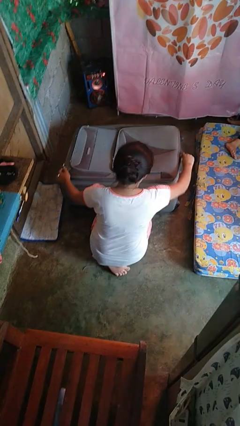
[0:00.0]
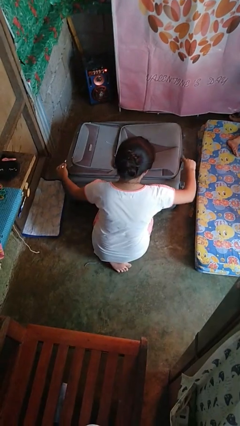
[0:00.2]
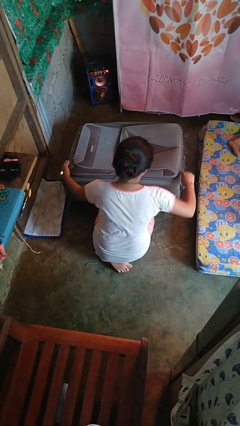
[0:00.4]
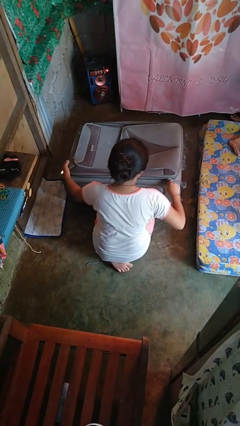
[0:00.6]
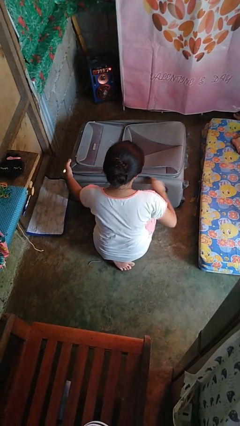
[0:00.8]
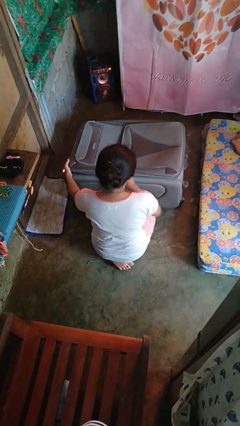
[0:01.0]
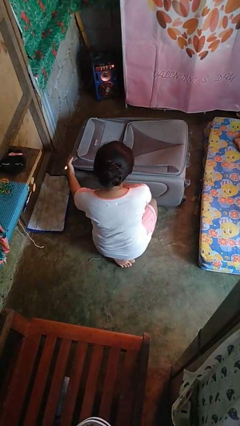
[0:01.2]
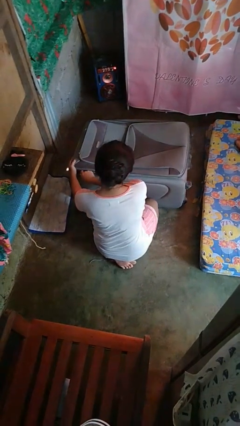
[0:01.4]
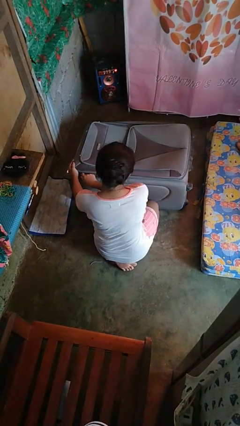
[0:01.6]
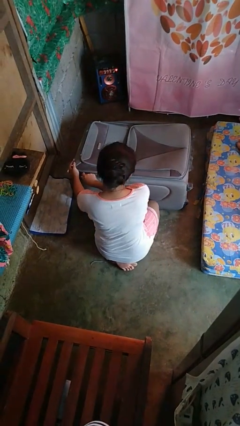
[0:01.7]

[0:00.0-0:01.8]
person closes suitcase

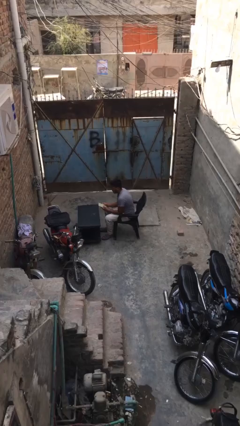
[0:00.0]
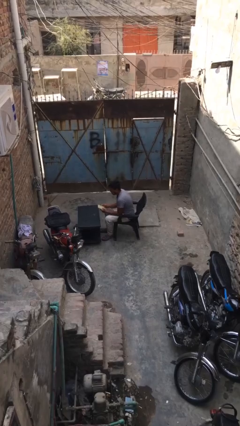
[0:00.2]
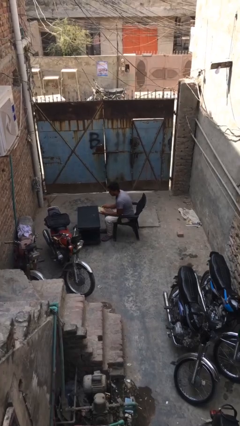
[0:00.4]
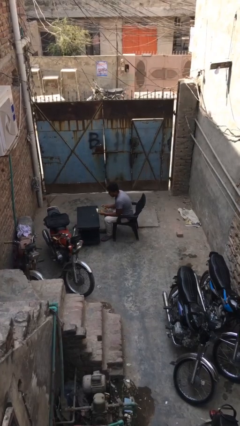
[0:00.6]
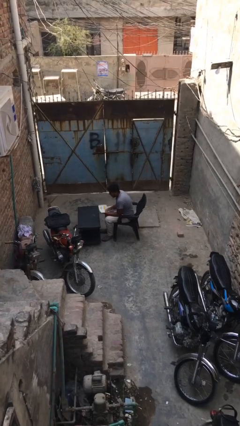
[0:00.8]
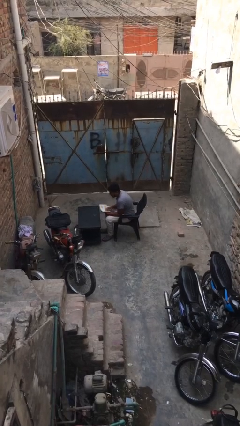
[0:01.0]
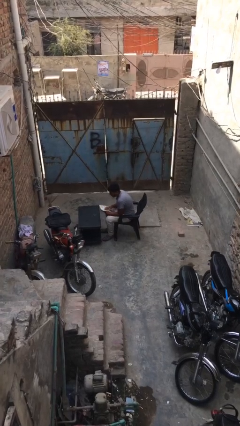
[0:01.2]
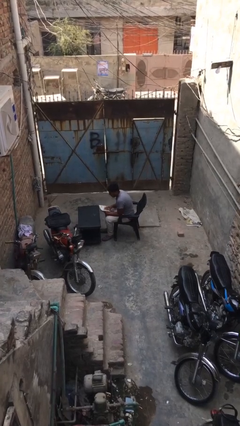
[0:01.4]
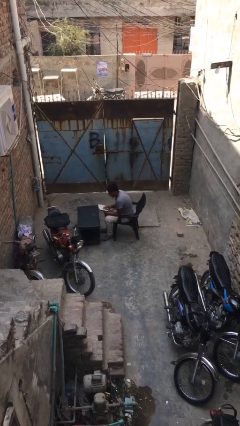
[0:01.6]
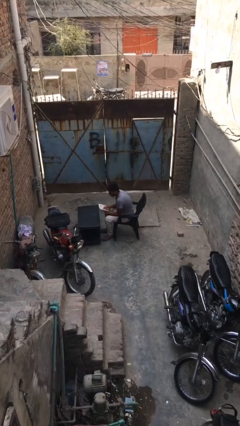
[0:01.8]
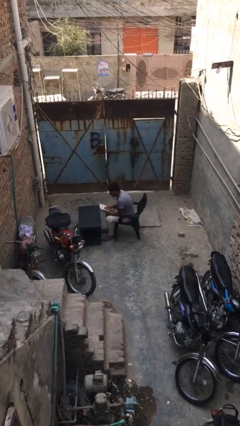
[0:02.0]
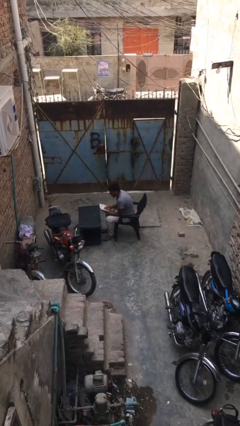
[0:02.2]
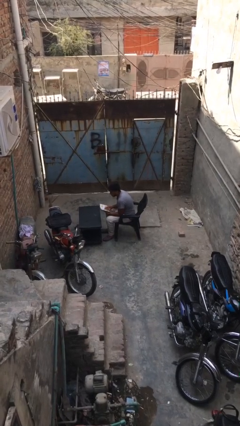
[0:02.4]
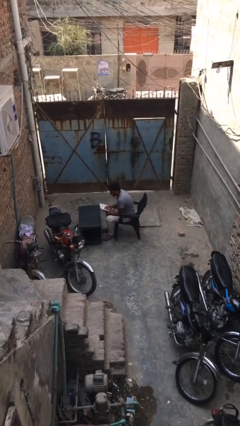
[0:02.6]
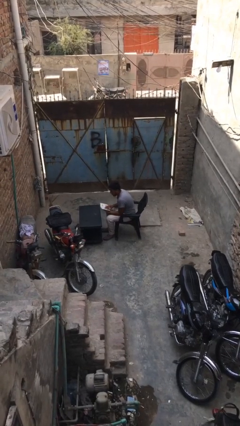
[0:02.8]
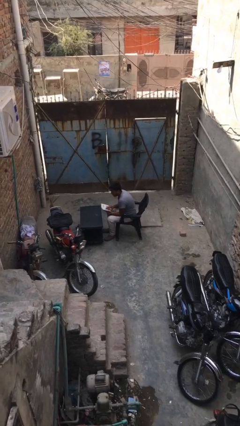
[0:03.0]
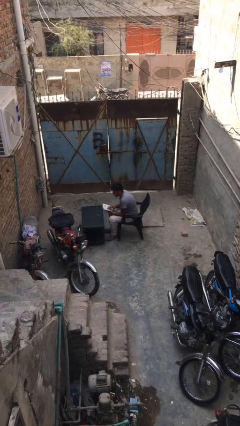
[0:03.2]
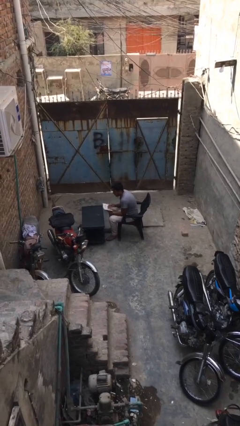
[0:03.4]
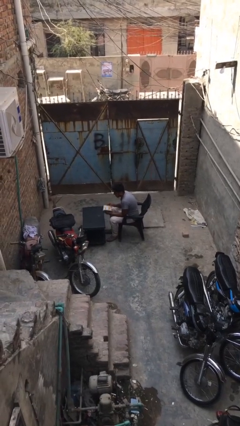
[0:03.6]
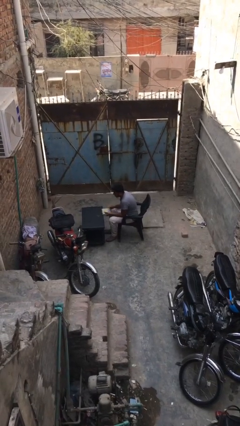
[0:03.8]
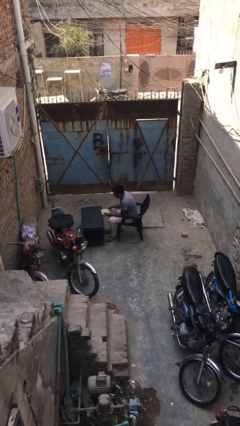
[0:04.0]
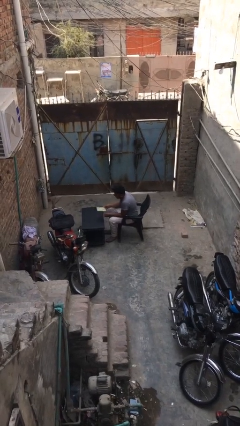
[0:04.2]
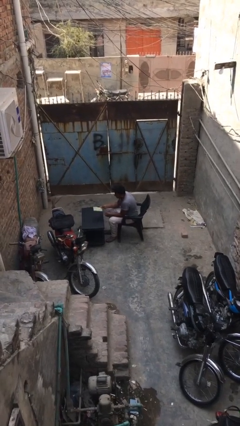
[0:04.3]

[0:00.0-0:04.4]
person reads document

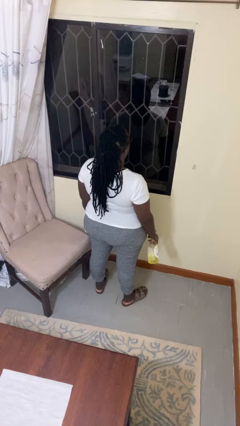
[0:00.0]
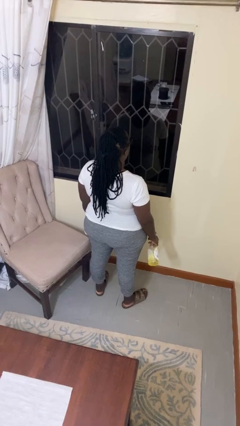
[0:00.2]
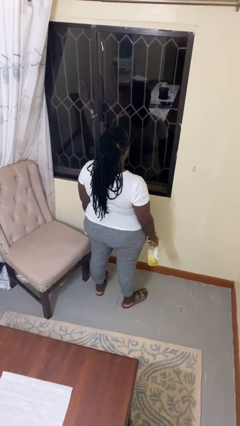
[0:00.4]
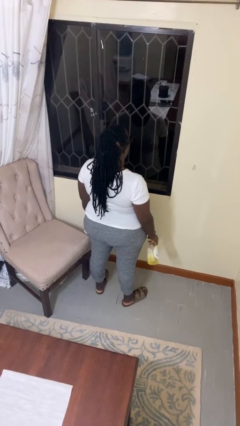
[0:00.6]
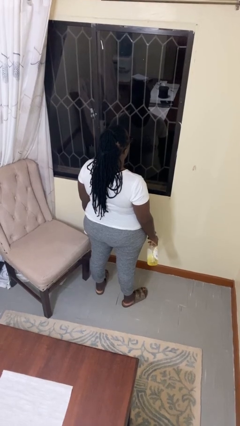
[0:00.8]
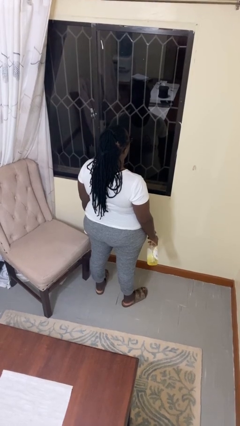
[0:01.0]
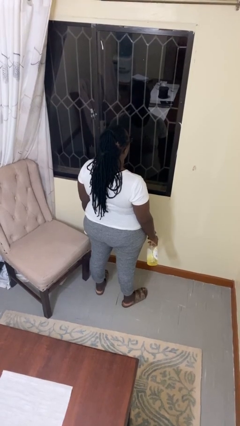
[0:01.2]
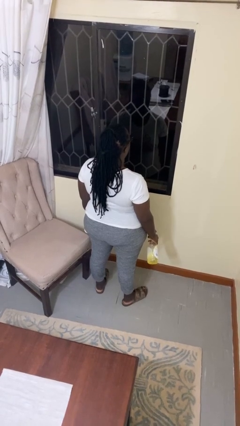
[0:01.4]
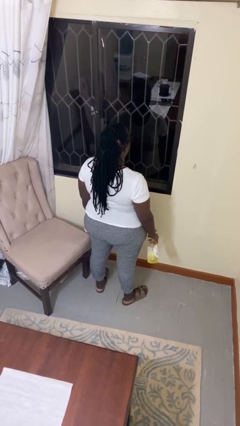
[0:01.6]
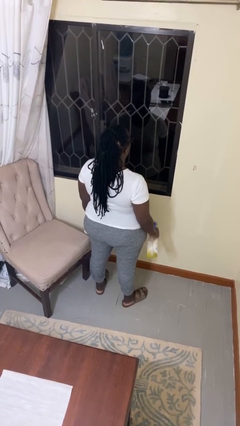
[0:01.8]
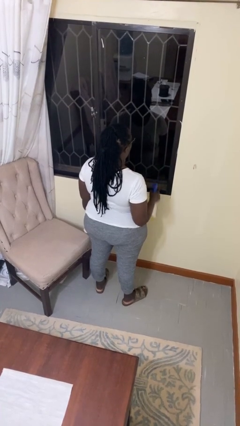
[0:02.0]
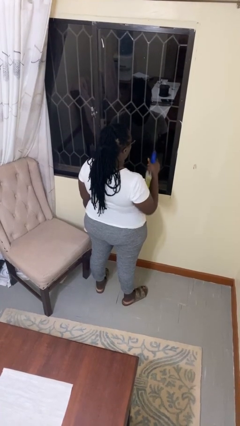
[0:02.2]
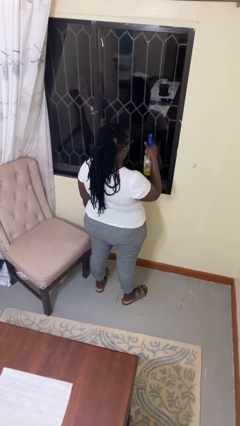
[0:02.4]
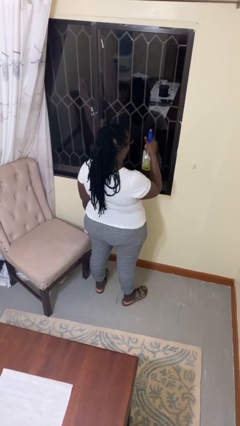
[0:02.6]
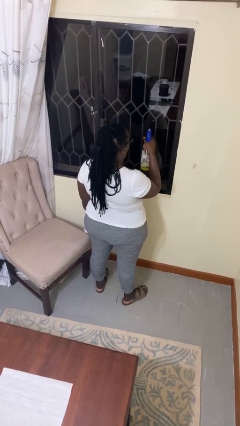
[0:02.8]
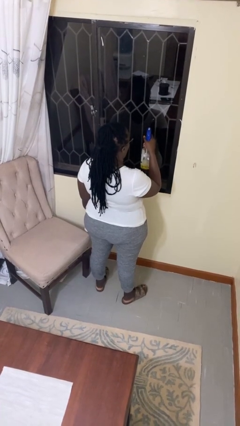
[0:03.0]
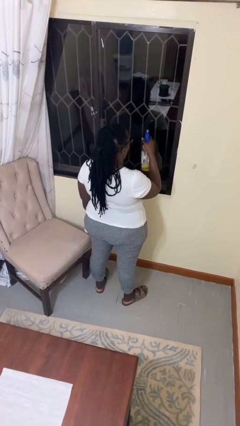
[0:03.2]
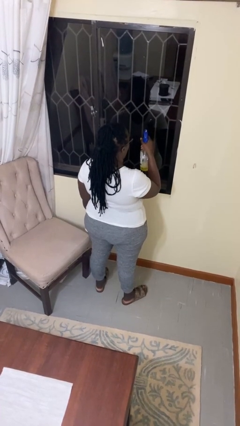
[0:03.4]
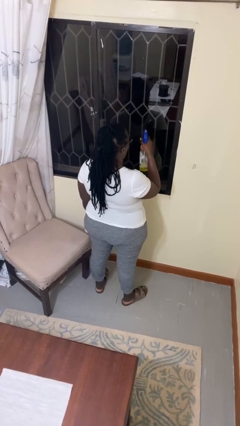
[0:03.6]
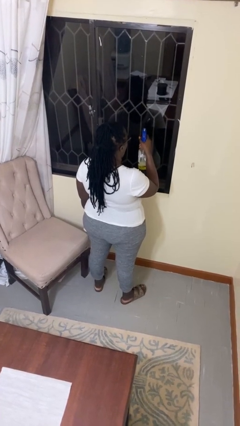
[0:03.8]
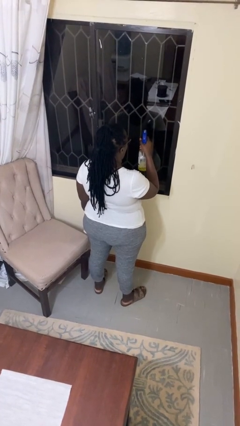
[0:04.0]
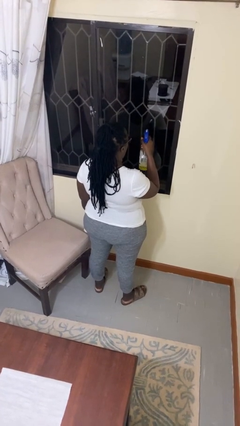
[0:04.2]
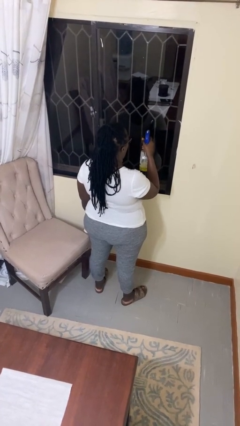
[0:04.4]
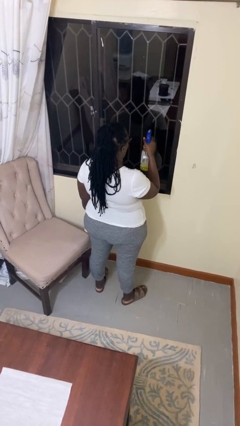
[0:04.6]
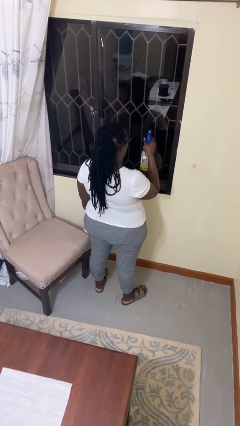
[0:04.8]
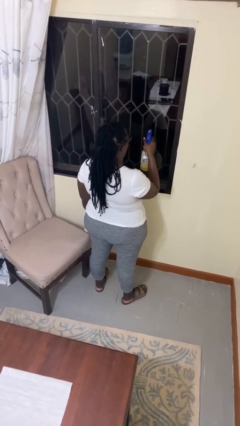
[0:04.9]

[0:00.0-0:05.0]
person sprays from bottle

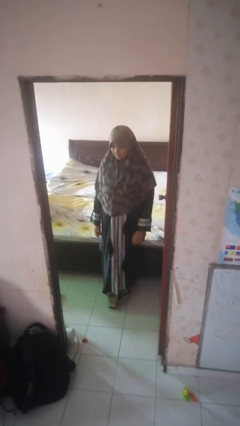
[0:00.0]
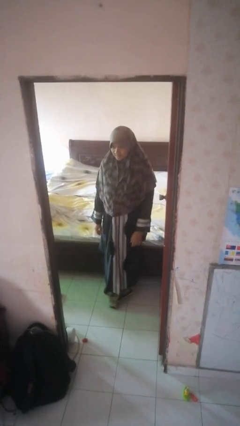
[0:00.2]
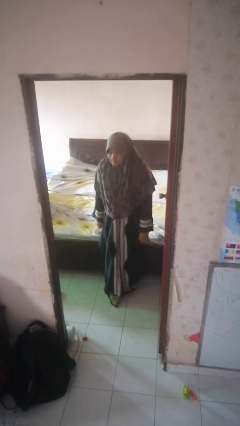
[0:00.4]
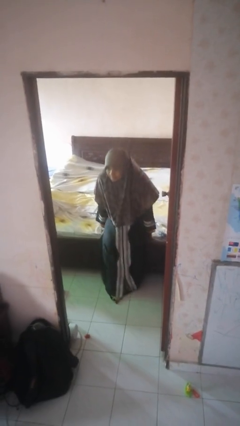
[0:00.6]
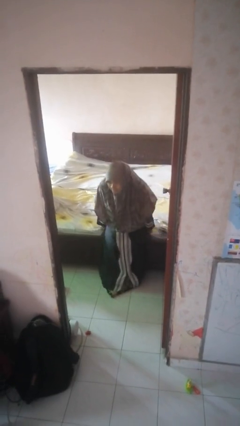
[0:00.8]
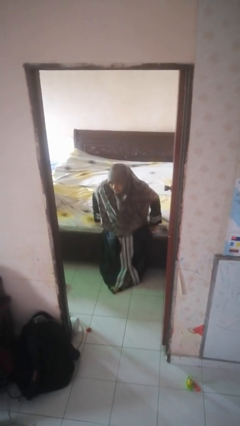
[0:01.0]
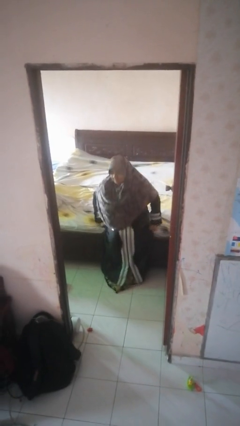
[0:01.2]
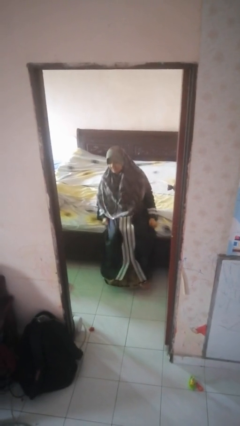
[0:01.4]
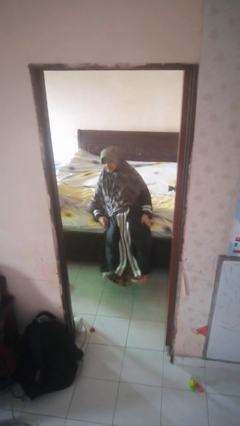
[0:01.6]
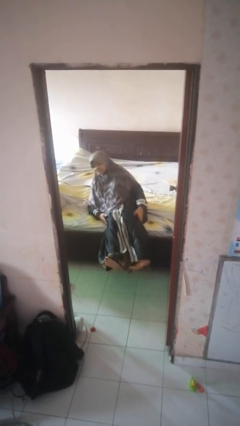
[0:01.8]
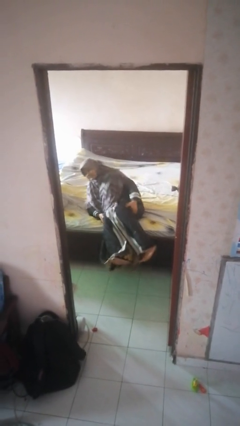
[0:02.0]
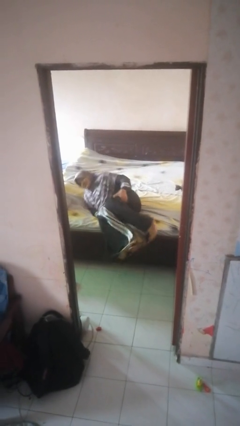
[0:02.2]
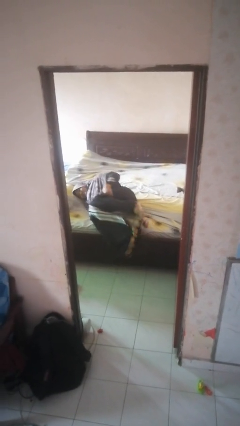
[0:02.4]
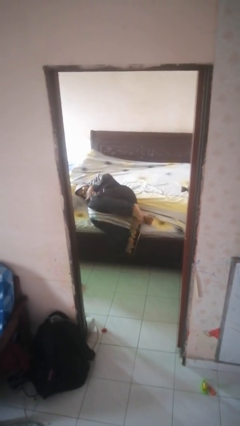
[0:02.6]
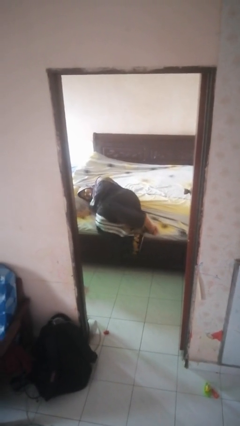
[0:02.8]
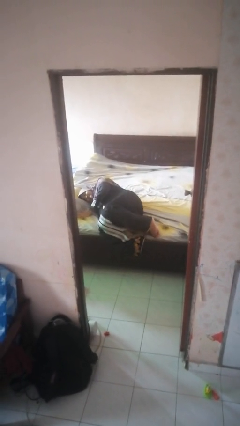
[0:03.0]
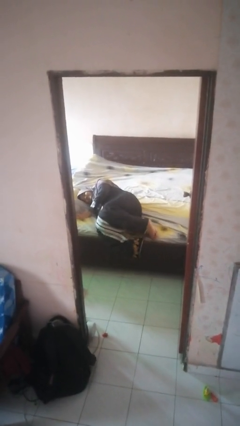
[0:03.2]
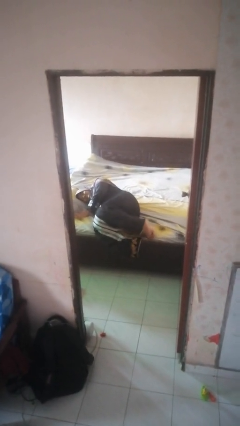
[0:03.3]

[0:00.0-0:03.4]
person lies down on bed

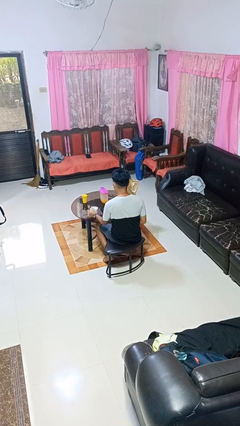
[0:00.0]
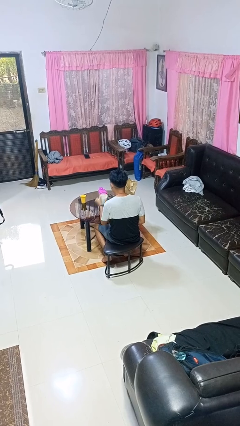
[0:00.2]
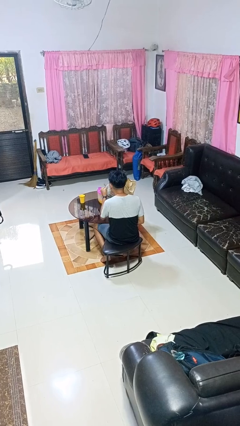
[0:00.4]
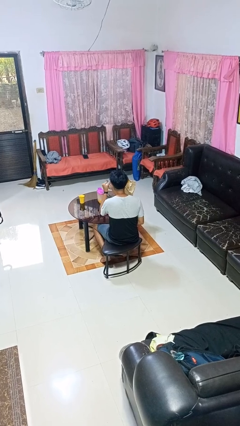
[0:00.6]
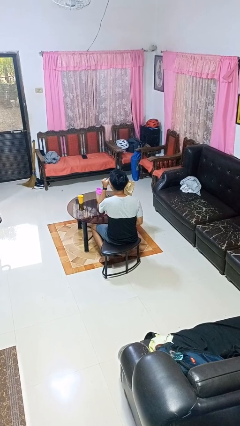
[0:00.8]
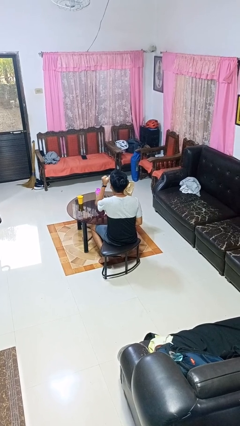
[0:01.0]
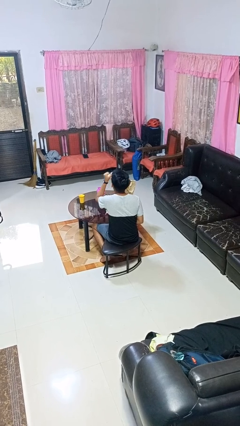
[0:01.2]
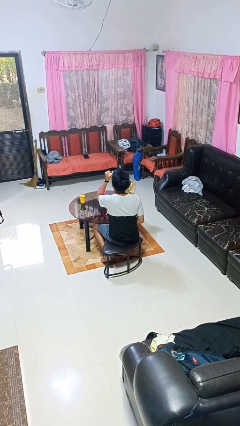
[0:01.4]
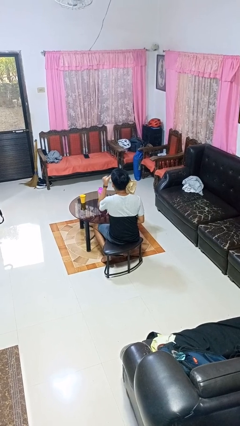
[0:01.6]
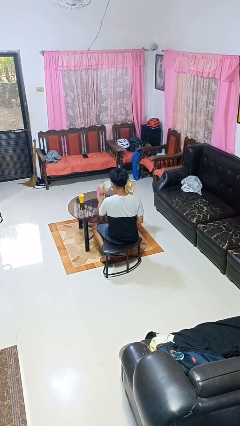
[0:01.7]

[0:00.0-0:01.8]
person drinks from mug

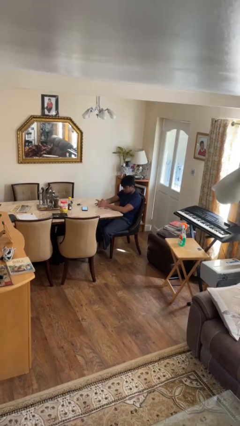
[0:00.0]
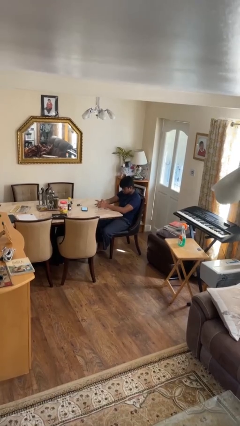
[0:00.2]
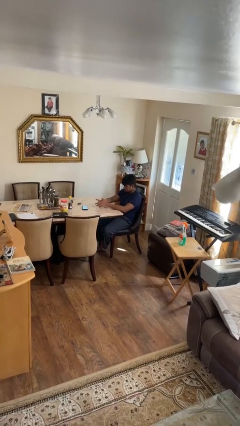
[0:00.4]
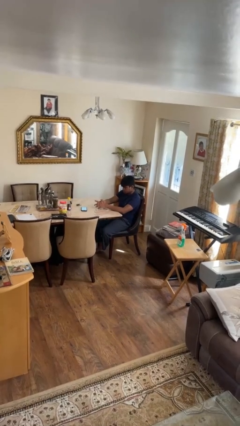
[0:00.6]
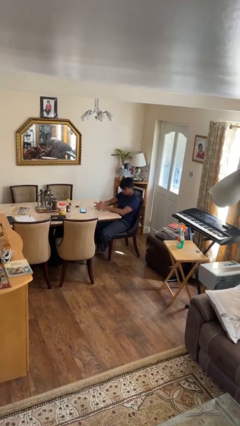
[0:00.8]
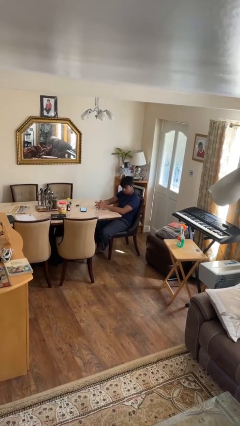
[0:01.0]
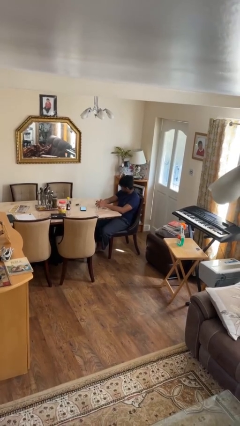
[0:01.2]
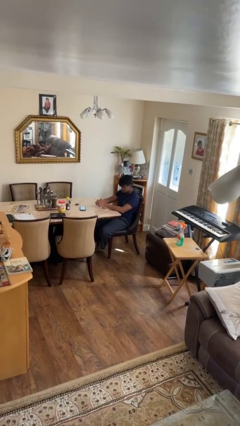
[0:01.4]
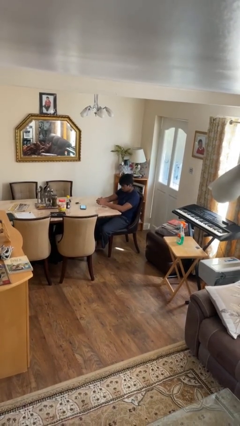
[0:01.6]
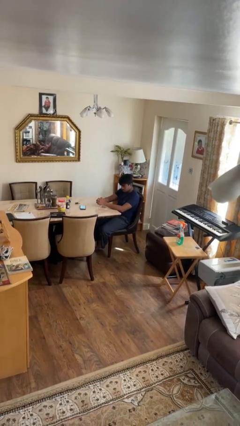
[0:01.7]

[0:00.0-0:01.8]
person shakes head
